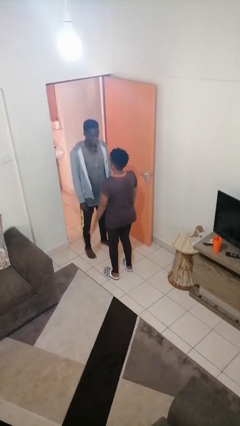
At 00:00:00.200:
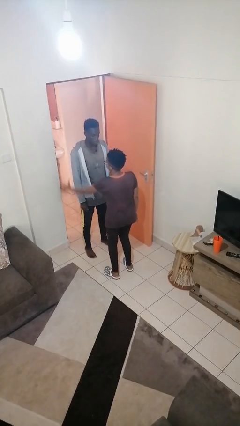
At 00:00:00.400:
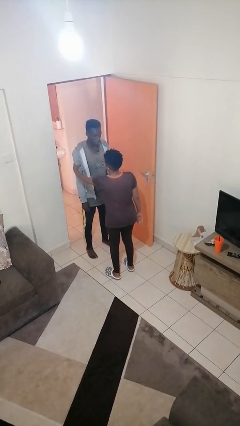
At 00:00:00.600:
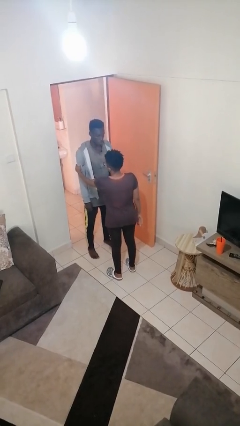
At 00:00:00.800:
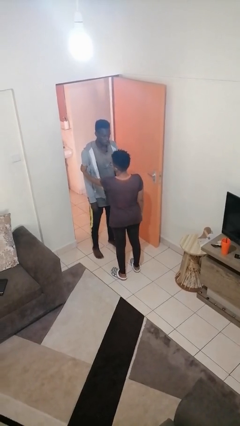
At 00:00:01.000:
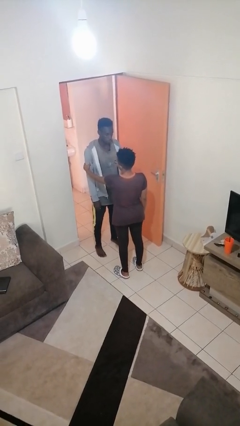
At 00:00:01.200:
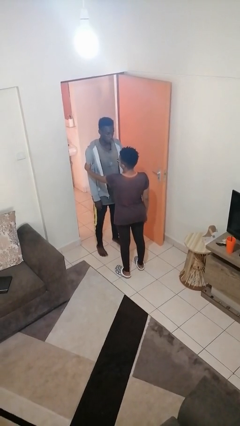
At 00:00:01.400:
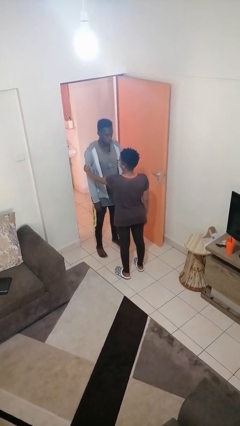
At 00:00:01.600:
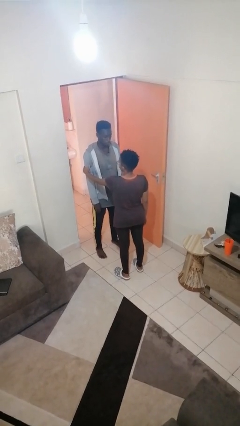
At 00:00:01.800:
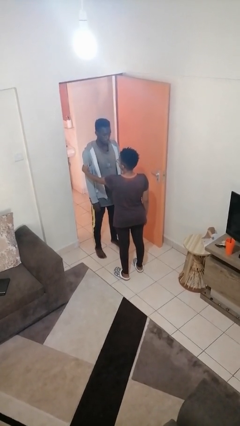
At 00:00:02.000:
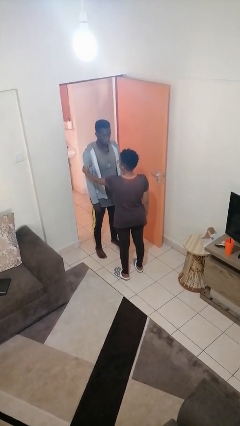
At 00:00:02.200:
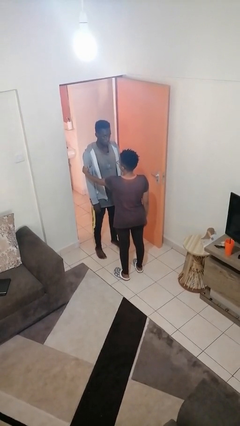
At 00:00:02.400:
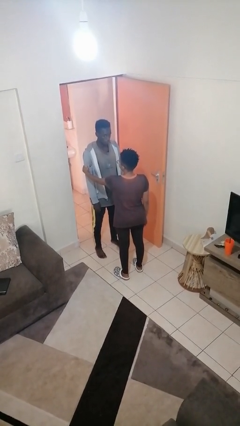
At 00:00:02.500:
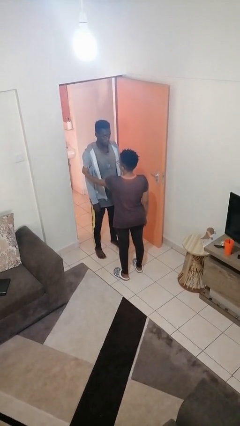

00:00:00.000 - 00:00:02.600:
person grabs person by bicep

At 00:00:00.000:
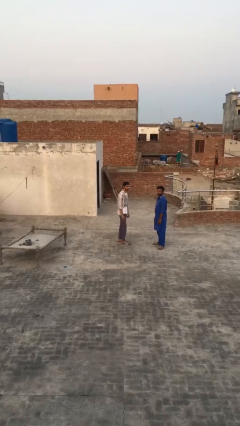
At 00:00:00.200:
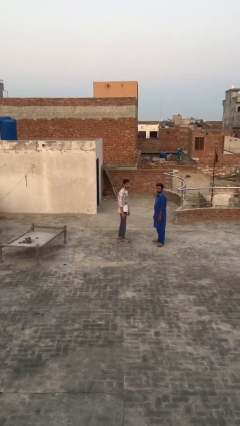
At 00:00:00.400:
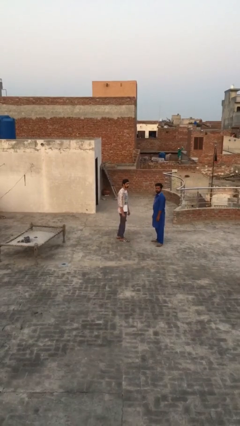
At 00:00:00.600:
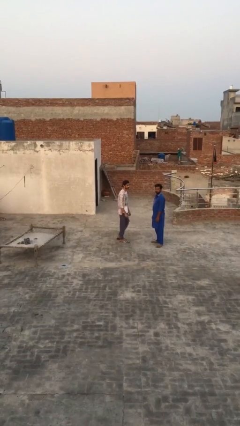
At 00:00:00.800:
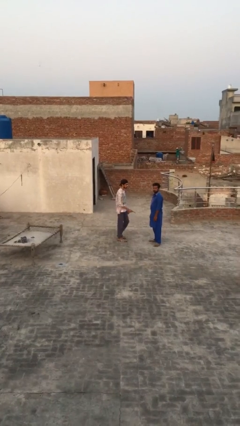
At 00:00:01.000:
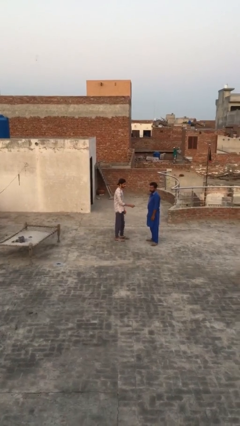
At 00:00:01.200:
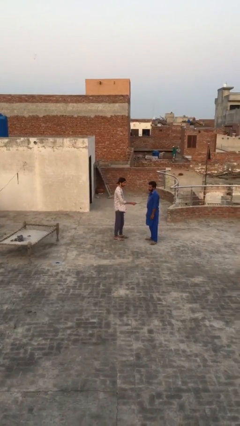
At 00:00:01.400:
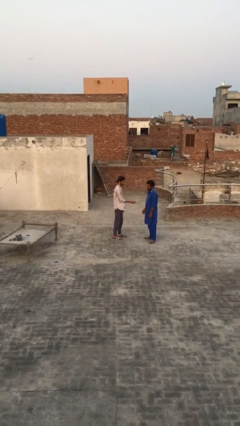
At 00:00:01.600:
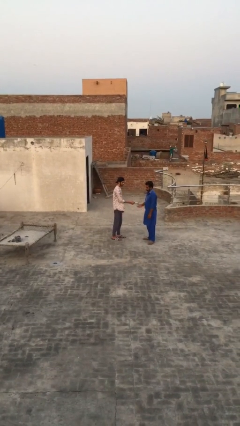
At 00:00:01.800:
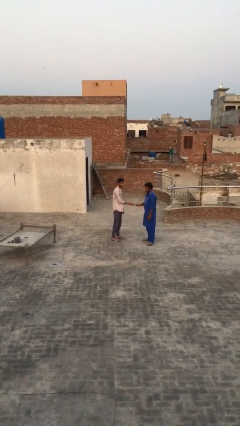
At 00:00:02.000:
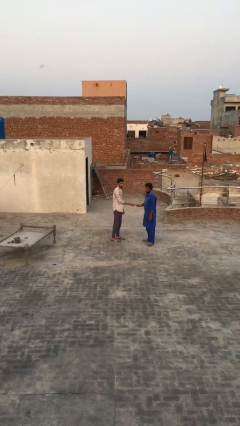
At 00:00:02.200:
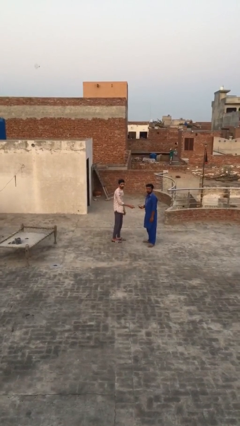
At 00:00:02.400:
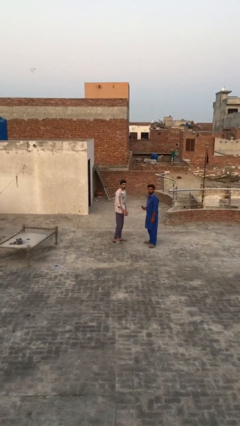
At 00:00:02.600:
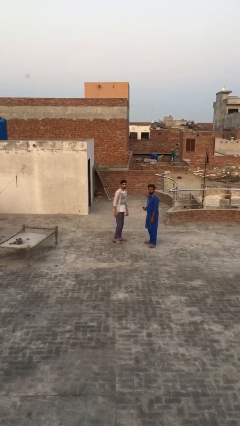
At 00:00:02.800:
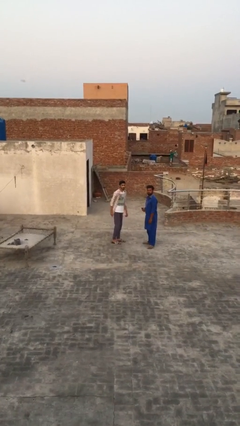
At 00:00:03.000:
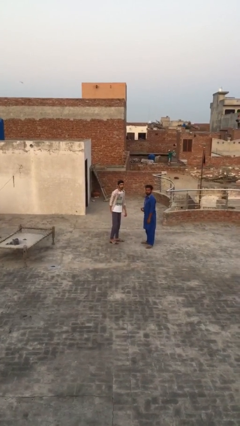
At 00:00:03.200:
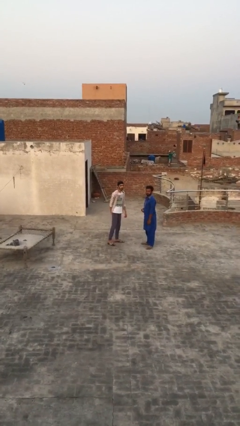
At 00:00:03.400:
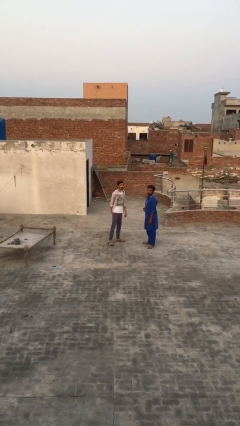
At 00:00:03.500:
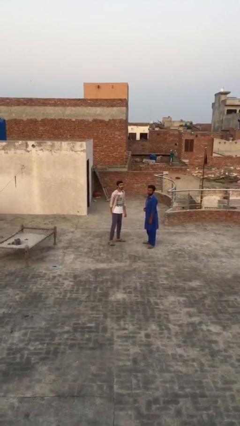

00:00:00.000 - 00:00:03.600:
person transfers object to person

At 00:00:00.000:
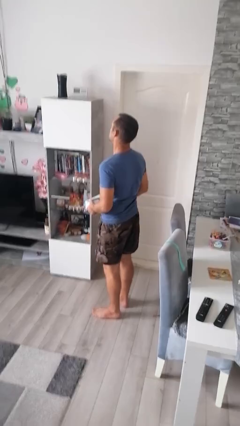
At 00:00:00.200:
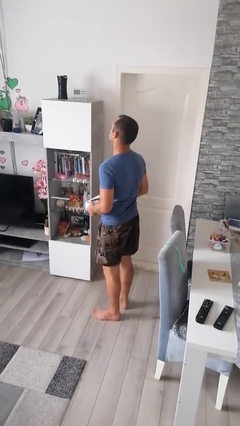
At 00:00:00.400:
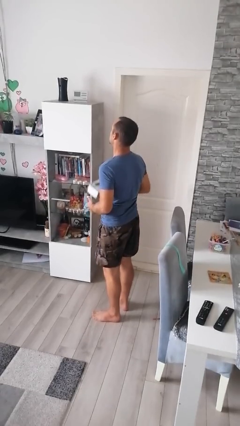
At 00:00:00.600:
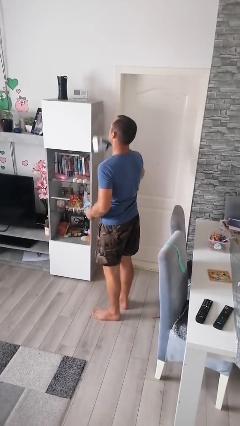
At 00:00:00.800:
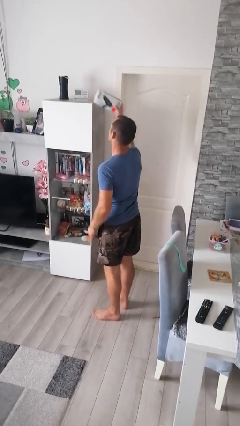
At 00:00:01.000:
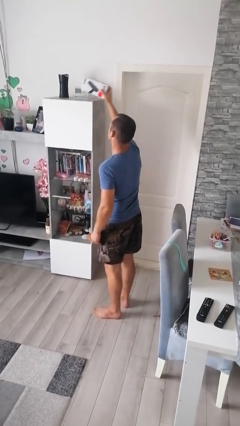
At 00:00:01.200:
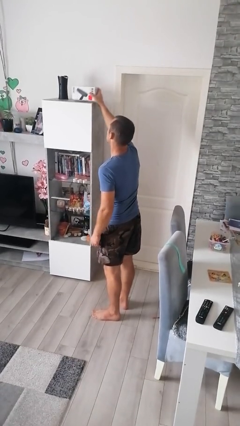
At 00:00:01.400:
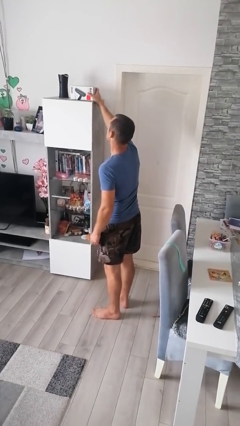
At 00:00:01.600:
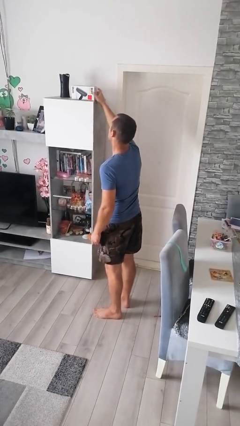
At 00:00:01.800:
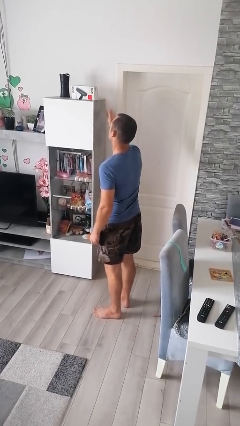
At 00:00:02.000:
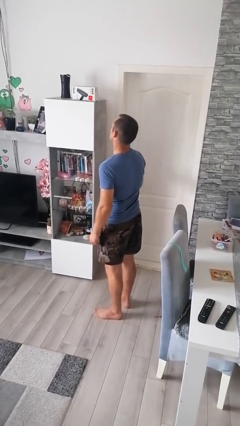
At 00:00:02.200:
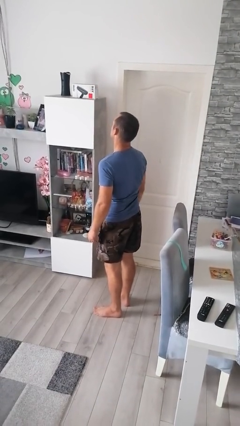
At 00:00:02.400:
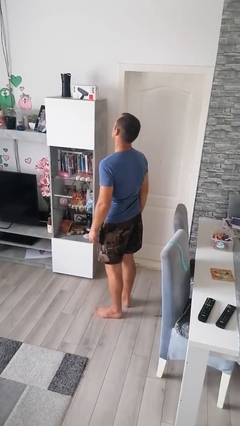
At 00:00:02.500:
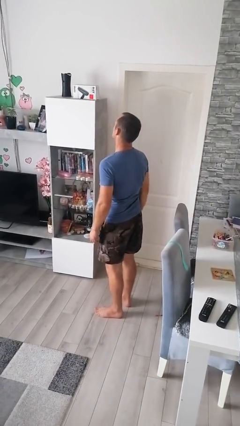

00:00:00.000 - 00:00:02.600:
person picks up object from shelf

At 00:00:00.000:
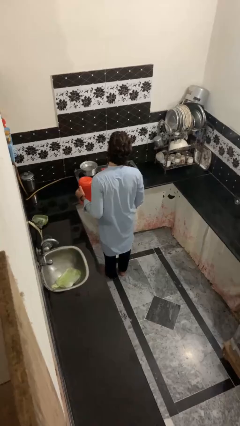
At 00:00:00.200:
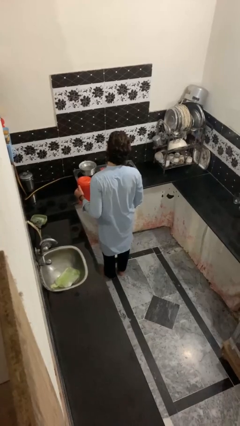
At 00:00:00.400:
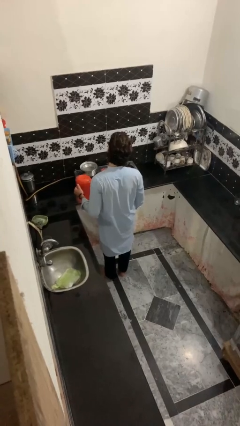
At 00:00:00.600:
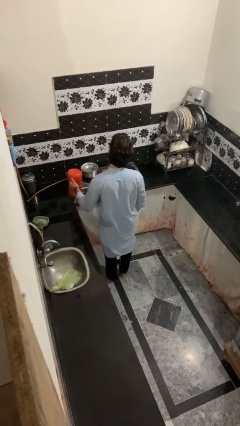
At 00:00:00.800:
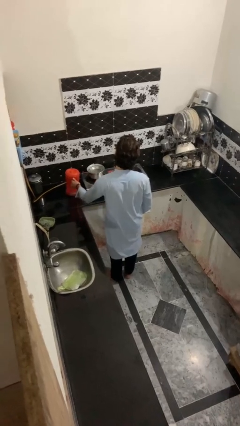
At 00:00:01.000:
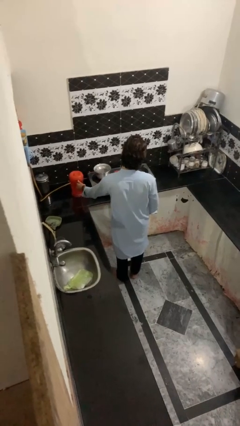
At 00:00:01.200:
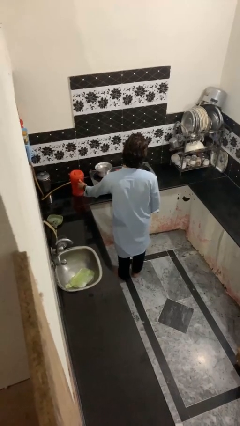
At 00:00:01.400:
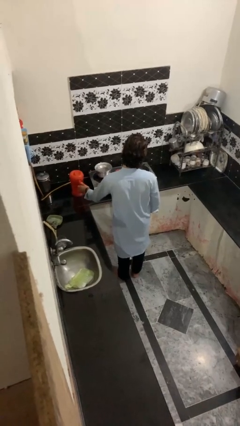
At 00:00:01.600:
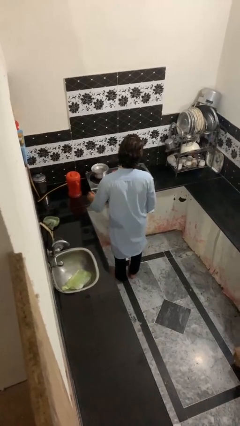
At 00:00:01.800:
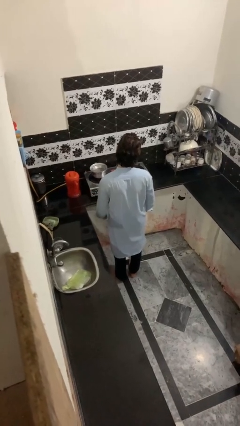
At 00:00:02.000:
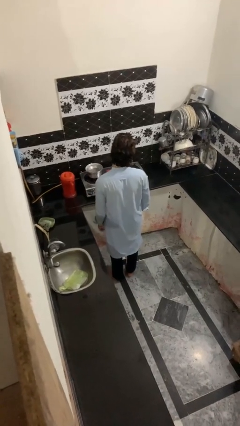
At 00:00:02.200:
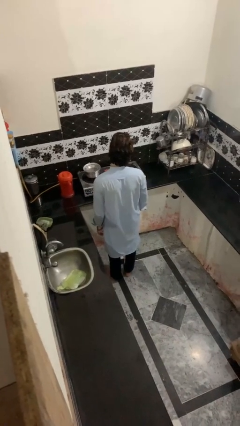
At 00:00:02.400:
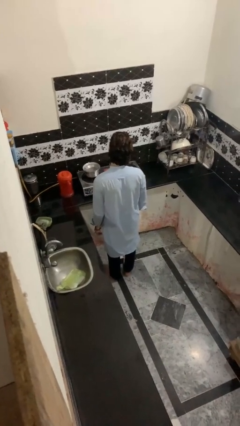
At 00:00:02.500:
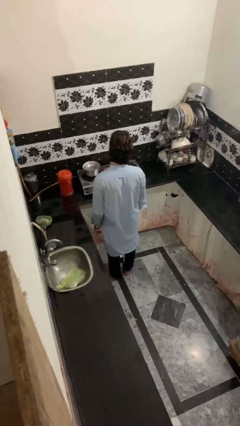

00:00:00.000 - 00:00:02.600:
person puts down object on countertop

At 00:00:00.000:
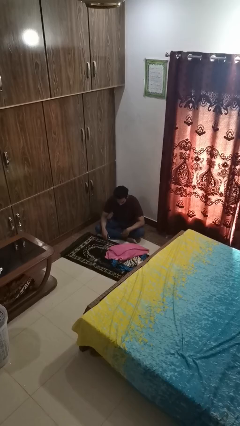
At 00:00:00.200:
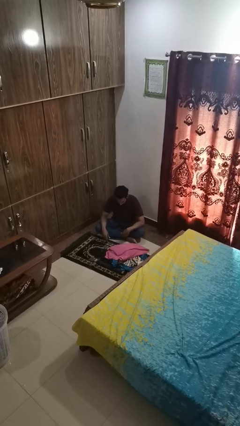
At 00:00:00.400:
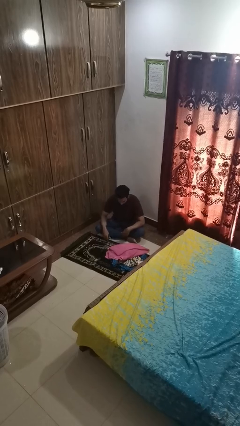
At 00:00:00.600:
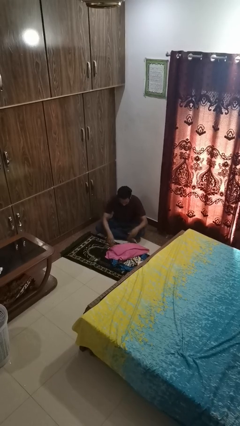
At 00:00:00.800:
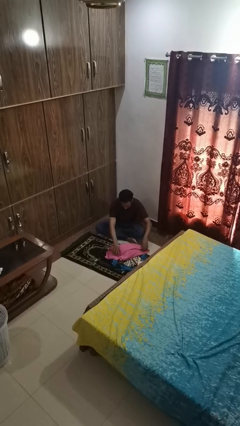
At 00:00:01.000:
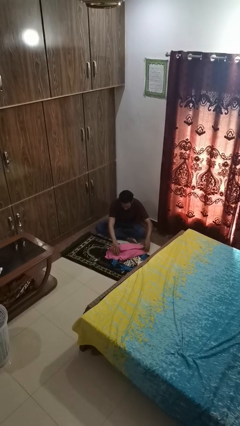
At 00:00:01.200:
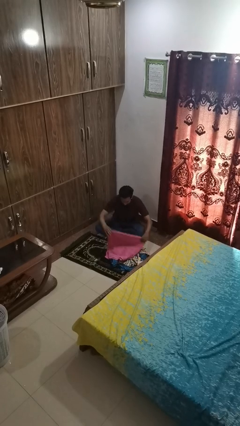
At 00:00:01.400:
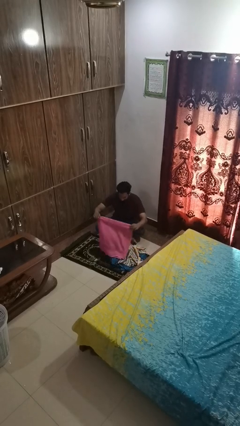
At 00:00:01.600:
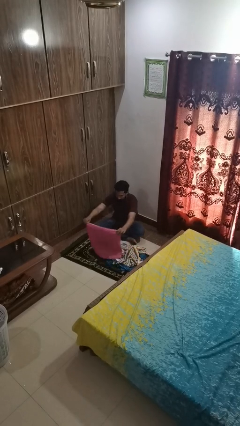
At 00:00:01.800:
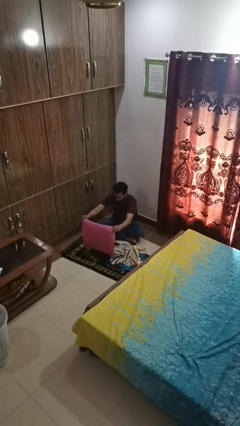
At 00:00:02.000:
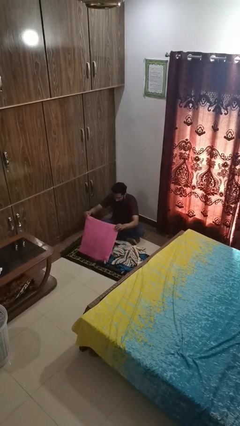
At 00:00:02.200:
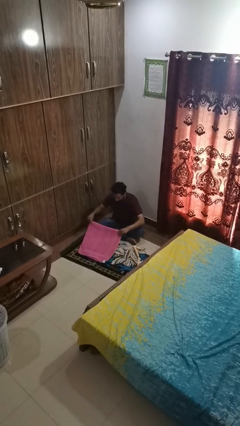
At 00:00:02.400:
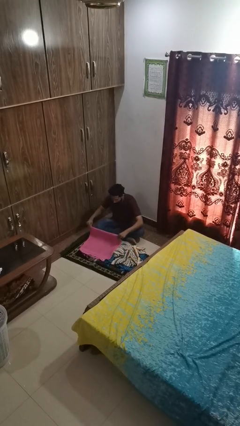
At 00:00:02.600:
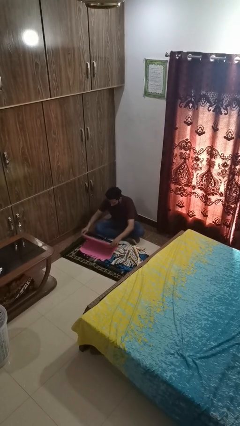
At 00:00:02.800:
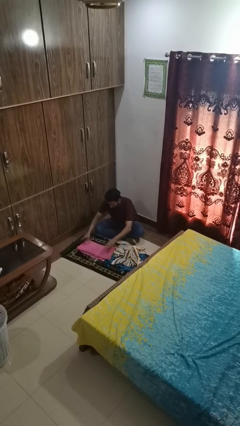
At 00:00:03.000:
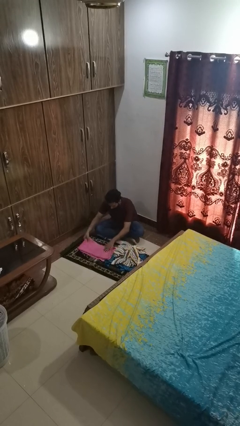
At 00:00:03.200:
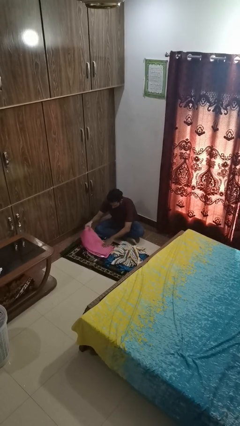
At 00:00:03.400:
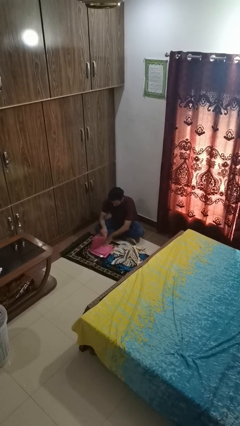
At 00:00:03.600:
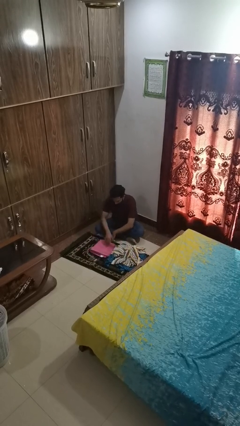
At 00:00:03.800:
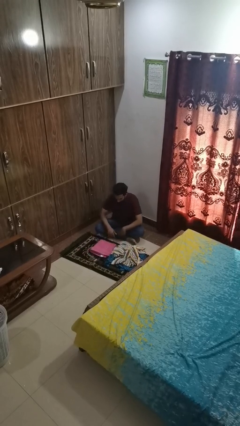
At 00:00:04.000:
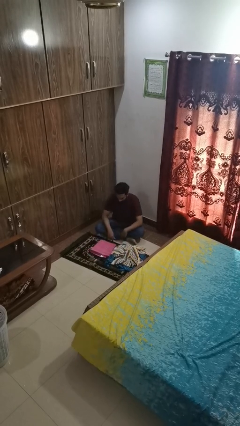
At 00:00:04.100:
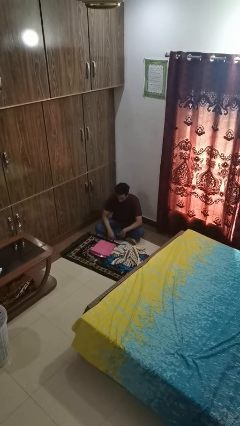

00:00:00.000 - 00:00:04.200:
person folds towel

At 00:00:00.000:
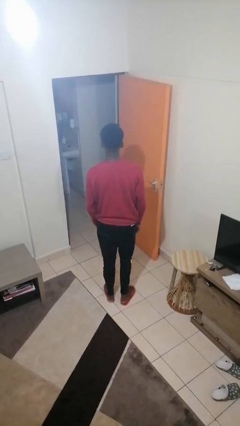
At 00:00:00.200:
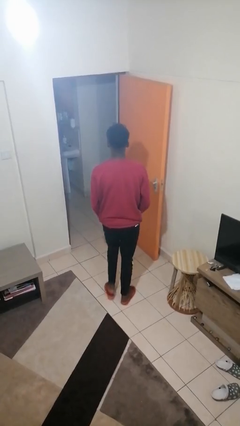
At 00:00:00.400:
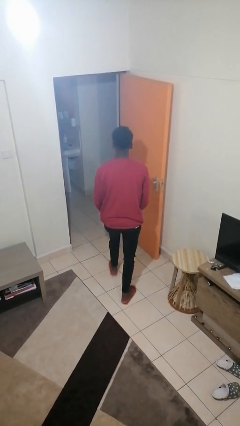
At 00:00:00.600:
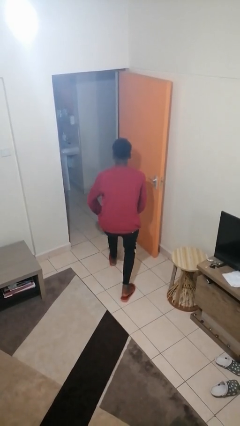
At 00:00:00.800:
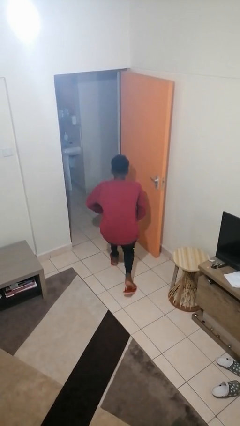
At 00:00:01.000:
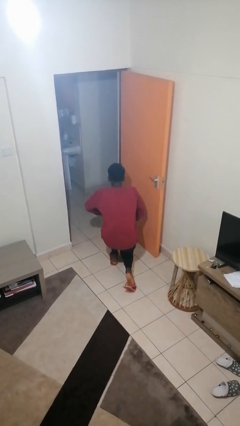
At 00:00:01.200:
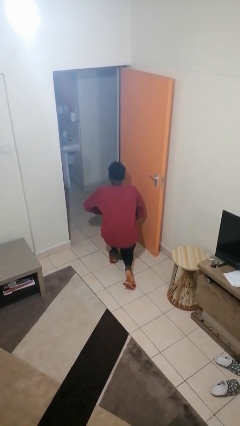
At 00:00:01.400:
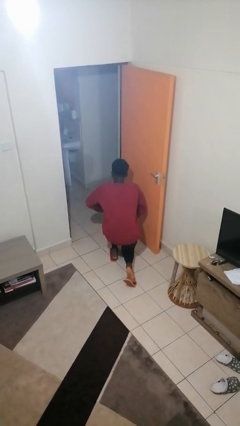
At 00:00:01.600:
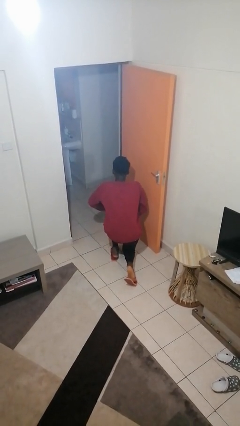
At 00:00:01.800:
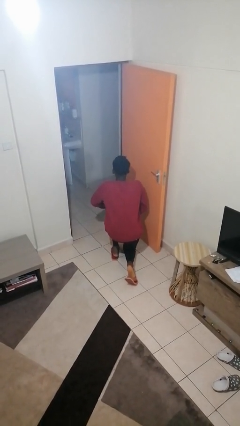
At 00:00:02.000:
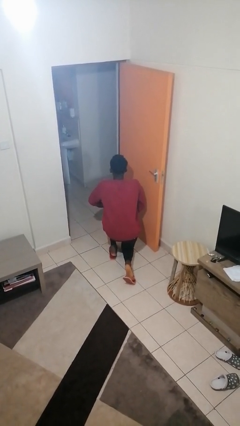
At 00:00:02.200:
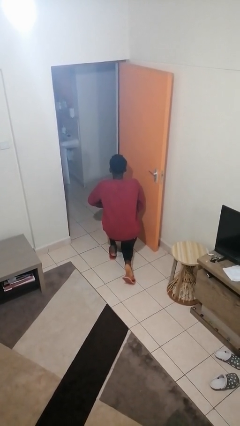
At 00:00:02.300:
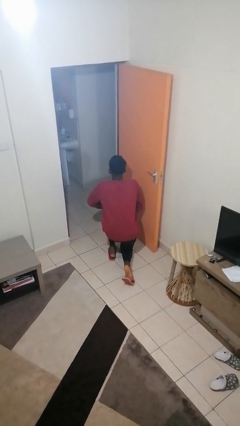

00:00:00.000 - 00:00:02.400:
person kneels
